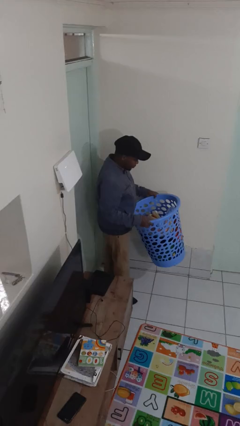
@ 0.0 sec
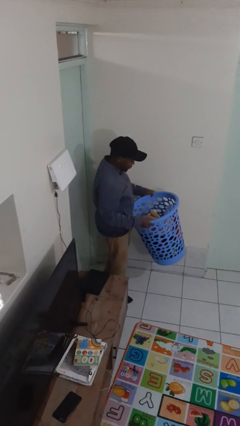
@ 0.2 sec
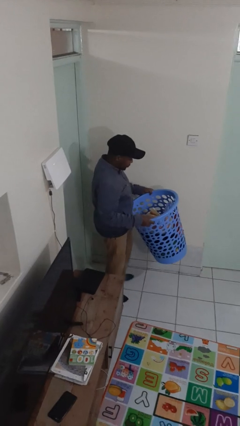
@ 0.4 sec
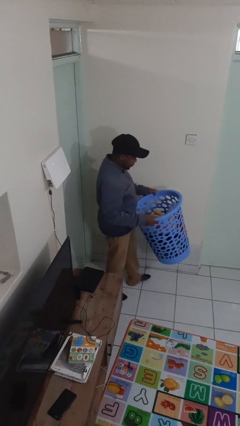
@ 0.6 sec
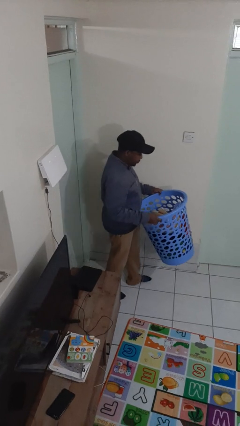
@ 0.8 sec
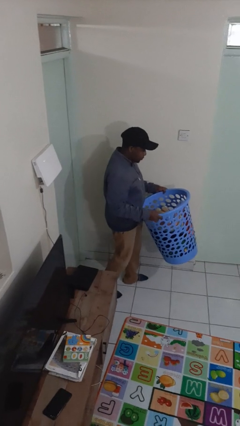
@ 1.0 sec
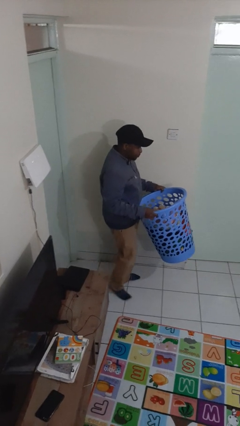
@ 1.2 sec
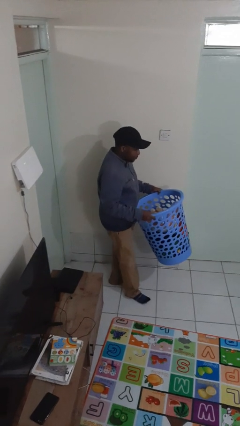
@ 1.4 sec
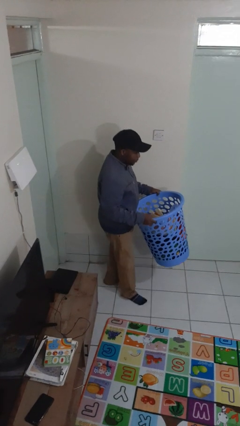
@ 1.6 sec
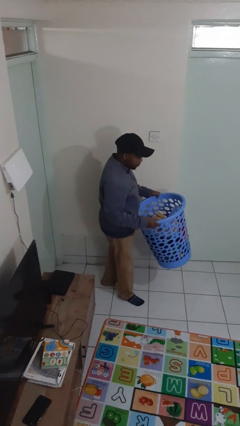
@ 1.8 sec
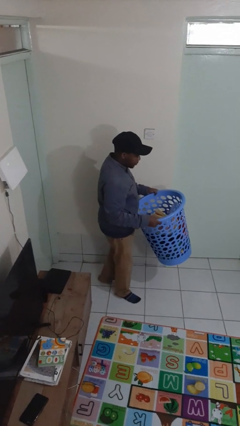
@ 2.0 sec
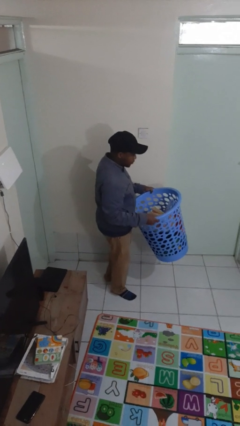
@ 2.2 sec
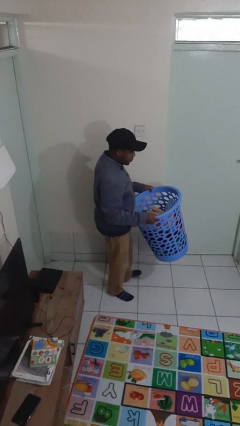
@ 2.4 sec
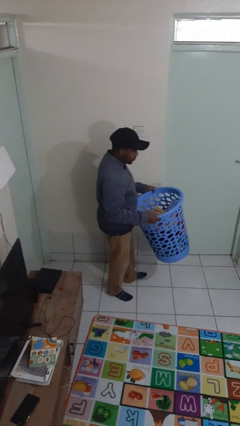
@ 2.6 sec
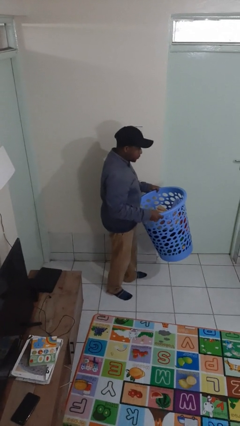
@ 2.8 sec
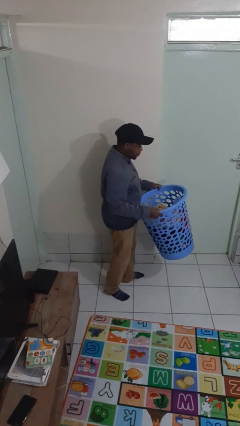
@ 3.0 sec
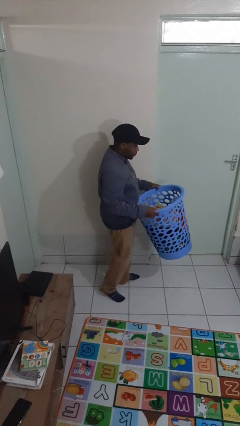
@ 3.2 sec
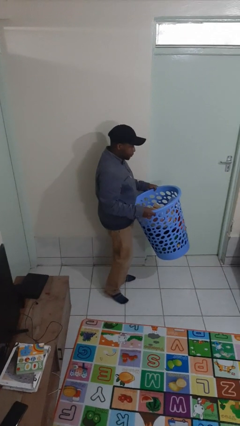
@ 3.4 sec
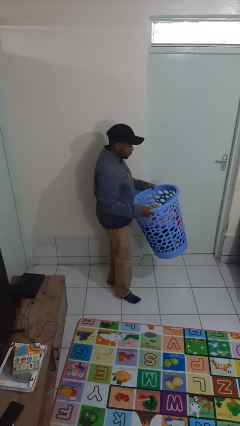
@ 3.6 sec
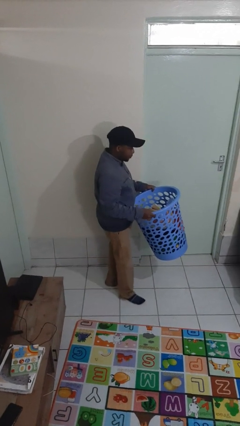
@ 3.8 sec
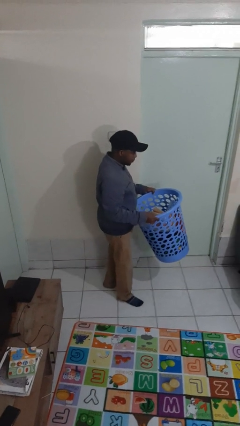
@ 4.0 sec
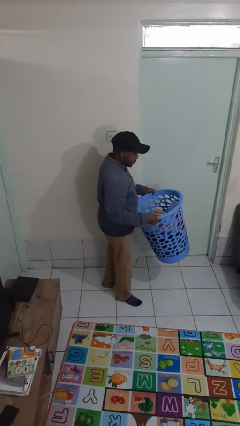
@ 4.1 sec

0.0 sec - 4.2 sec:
person carries laundry basket

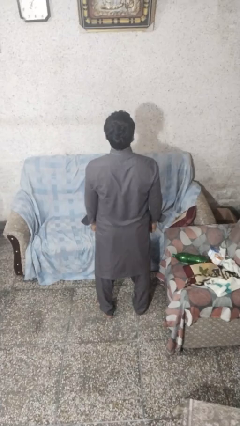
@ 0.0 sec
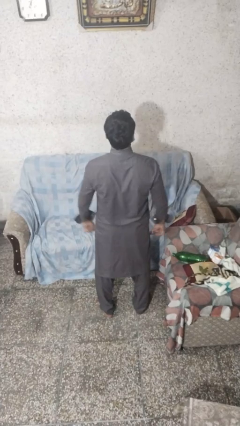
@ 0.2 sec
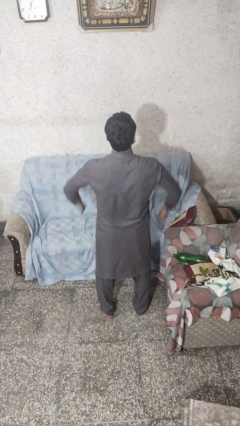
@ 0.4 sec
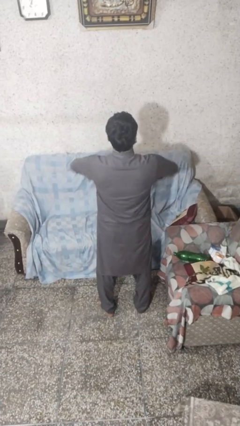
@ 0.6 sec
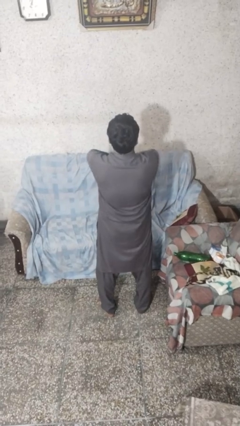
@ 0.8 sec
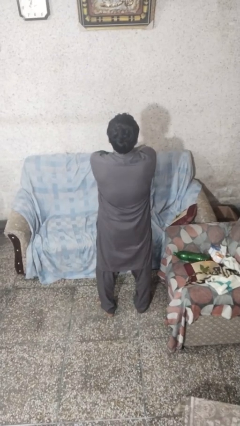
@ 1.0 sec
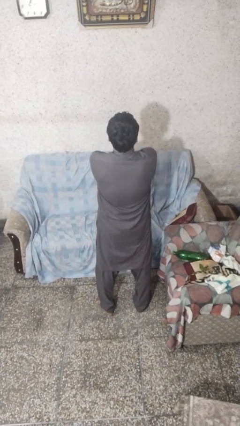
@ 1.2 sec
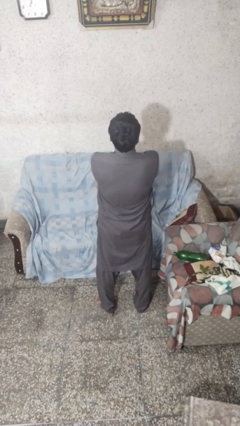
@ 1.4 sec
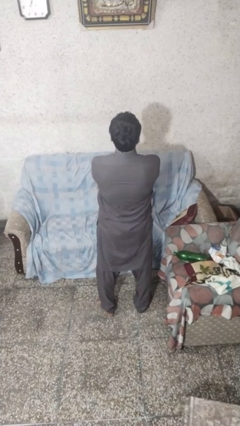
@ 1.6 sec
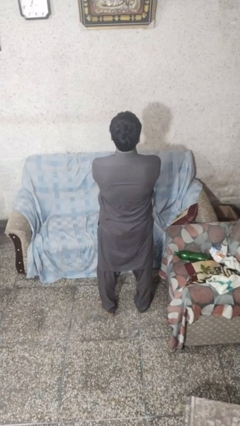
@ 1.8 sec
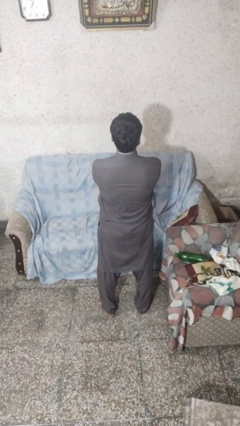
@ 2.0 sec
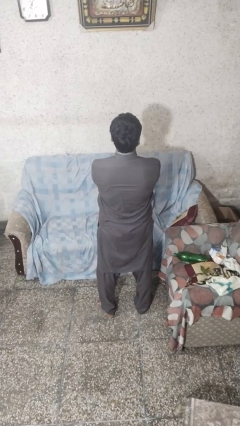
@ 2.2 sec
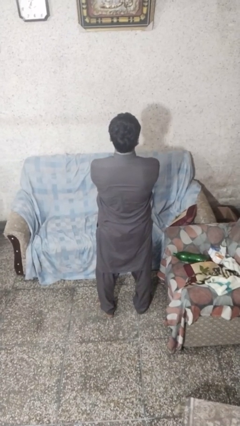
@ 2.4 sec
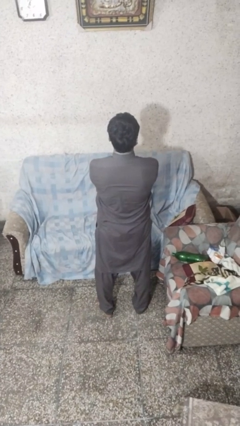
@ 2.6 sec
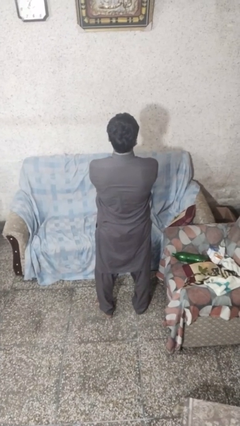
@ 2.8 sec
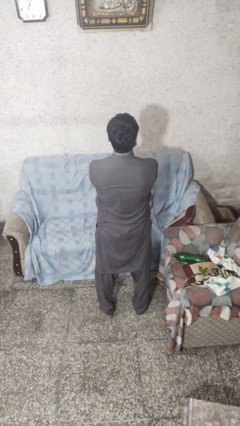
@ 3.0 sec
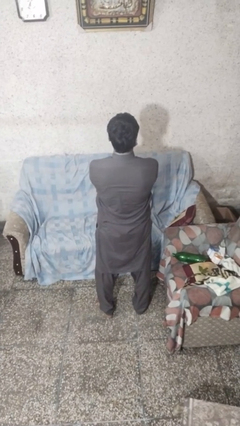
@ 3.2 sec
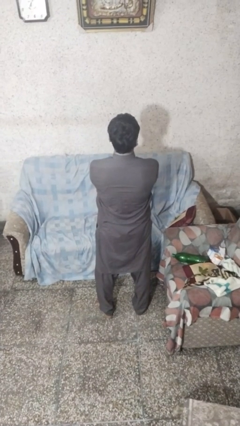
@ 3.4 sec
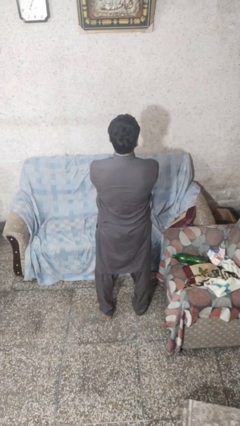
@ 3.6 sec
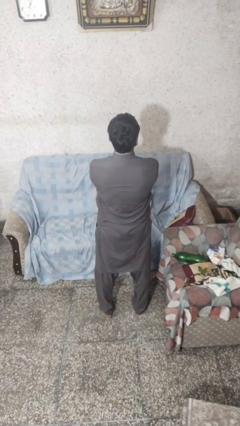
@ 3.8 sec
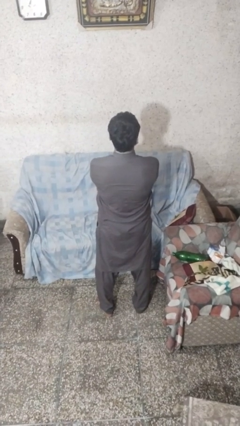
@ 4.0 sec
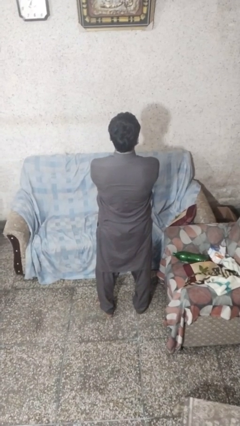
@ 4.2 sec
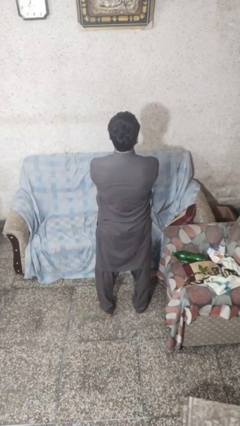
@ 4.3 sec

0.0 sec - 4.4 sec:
person gestures arms x

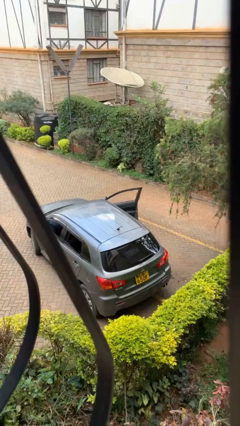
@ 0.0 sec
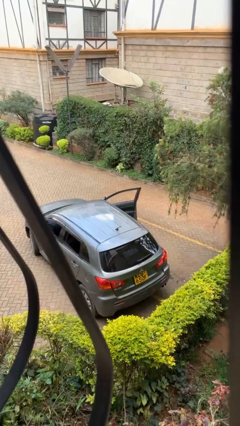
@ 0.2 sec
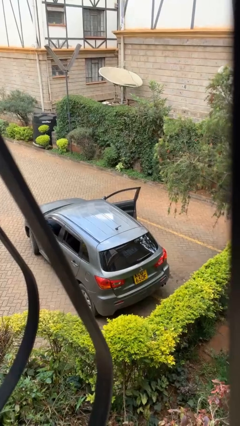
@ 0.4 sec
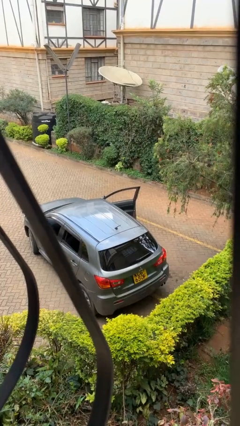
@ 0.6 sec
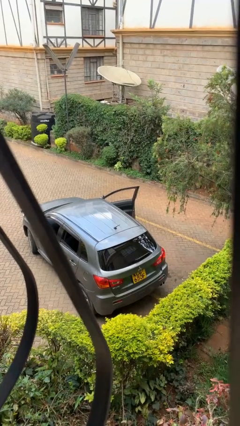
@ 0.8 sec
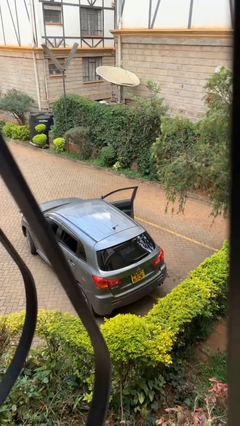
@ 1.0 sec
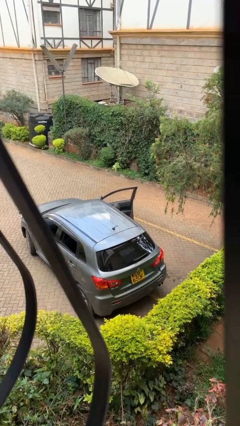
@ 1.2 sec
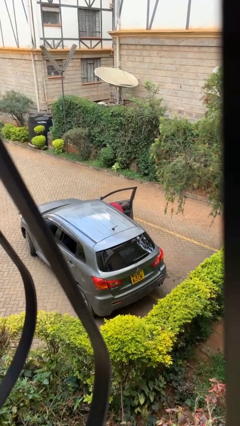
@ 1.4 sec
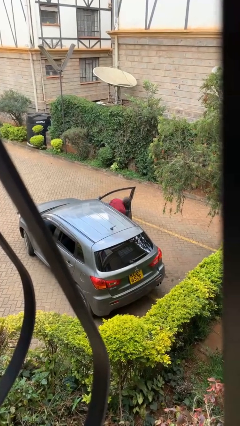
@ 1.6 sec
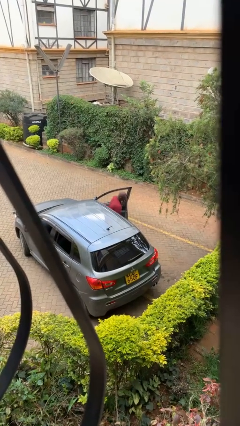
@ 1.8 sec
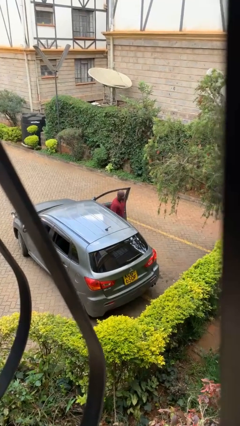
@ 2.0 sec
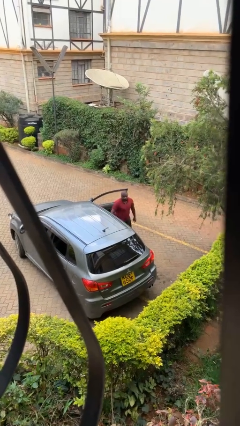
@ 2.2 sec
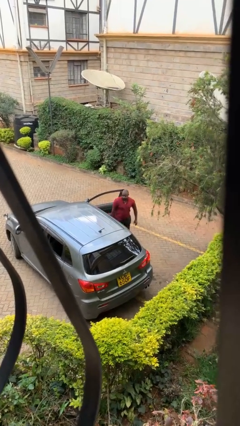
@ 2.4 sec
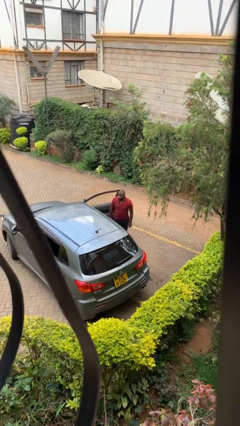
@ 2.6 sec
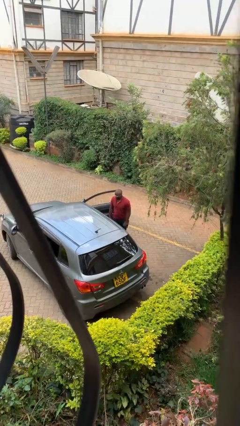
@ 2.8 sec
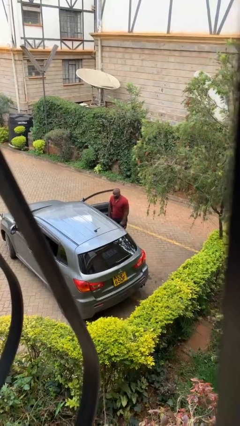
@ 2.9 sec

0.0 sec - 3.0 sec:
person exits car

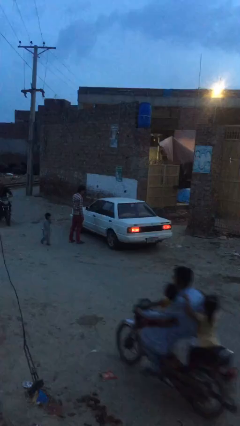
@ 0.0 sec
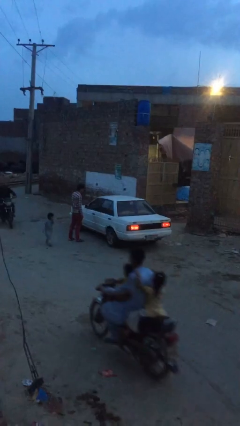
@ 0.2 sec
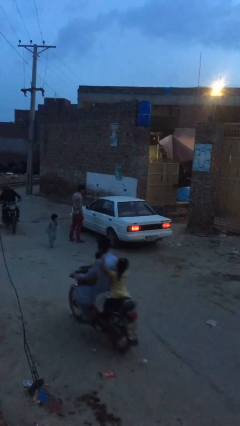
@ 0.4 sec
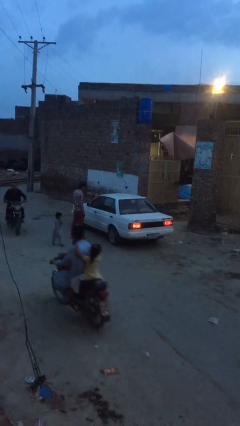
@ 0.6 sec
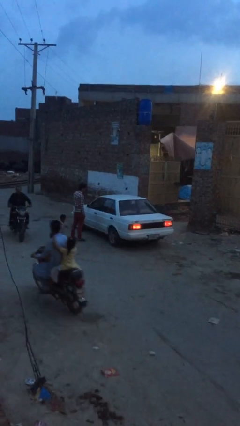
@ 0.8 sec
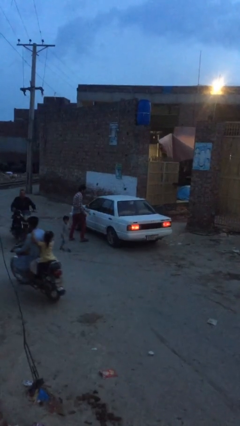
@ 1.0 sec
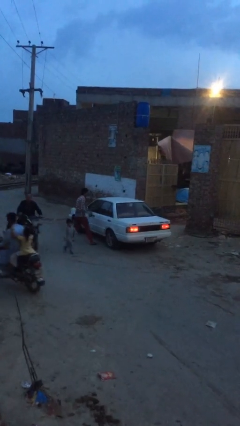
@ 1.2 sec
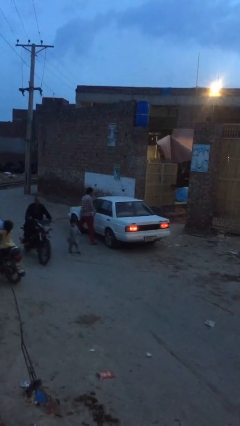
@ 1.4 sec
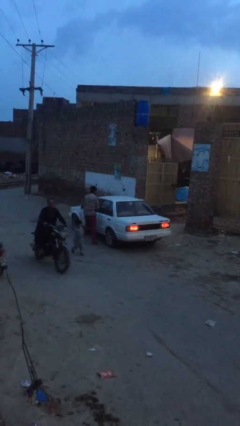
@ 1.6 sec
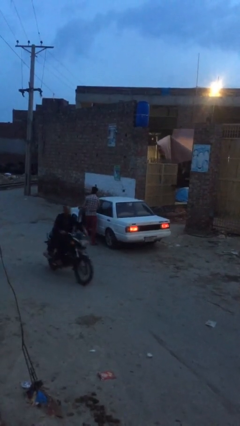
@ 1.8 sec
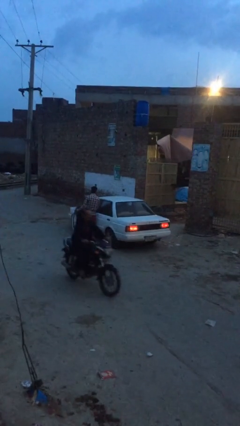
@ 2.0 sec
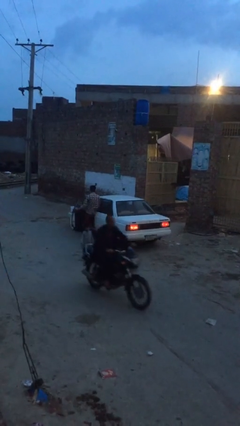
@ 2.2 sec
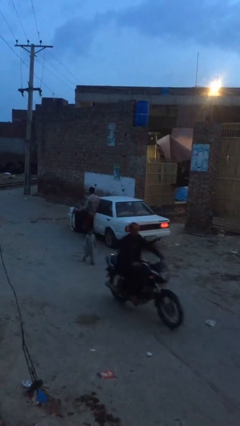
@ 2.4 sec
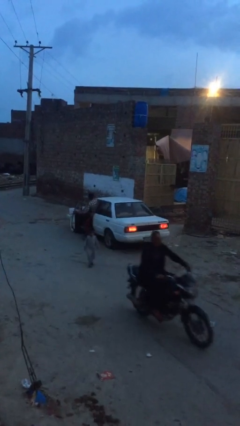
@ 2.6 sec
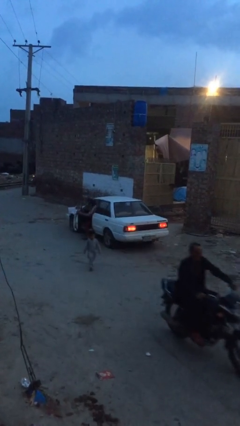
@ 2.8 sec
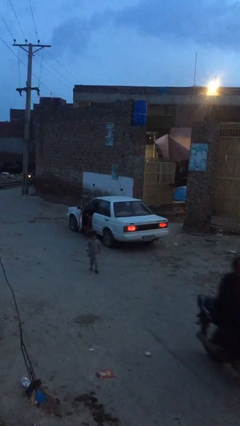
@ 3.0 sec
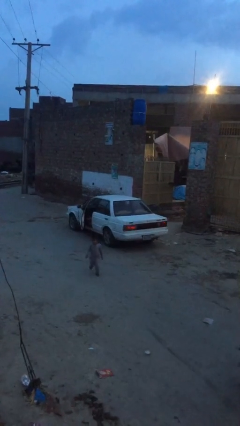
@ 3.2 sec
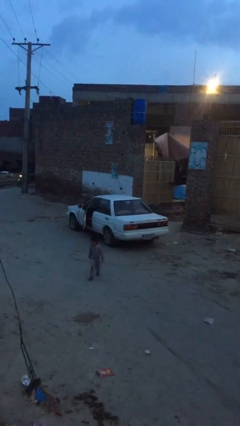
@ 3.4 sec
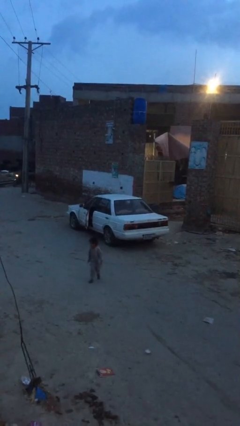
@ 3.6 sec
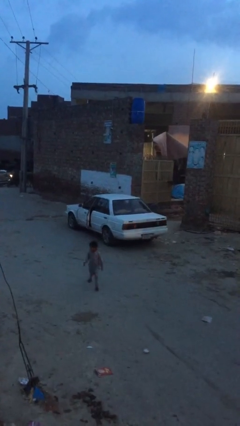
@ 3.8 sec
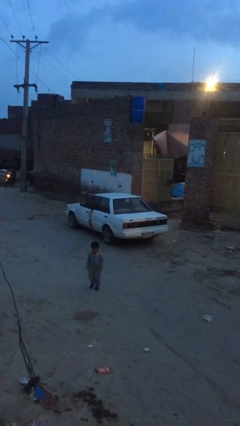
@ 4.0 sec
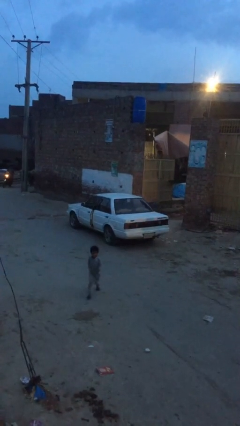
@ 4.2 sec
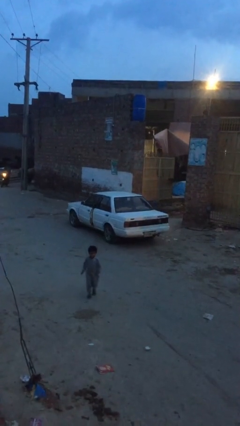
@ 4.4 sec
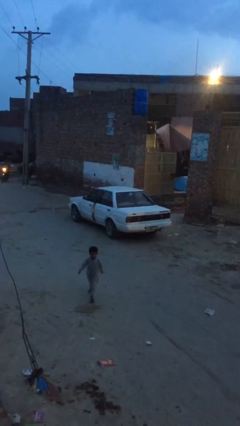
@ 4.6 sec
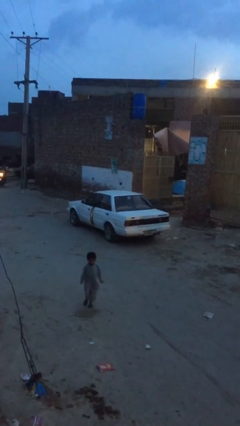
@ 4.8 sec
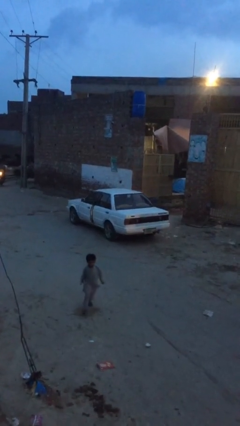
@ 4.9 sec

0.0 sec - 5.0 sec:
car picks up person

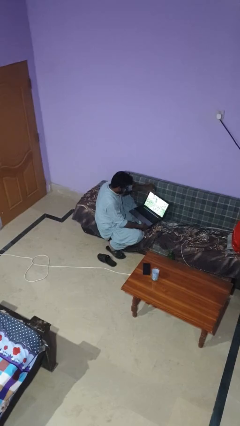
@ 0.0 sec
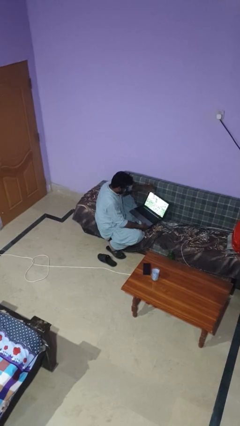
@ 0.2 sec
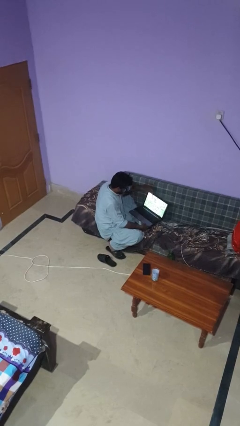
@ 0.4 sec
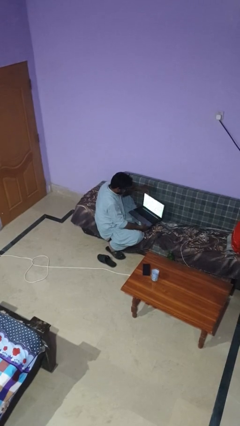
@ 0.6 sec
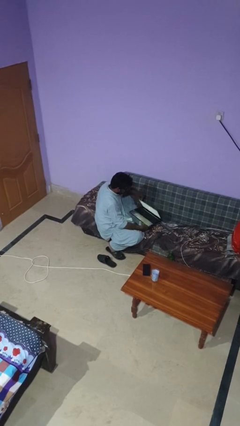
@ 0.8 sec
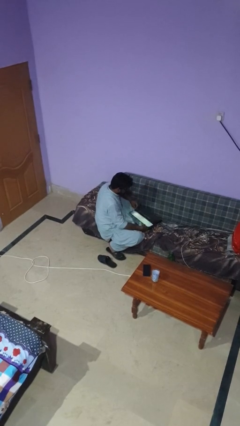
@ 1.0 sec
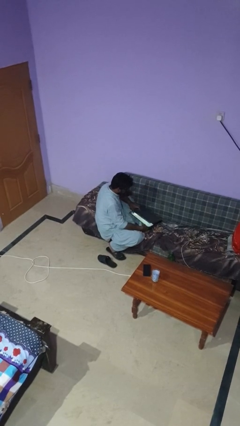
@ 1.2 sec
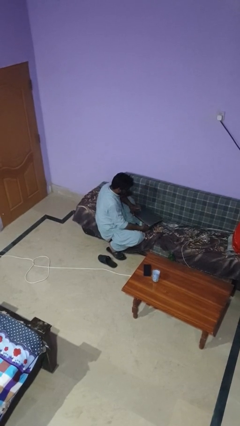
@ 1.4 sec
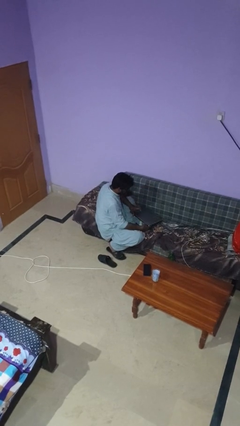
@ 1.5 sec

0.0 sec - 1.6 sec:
person closes laptop
